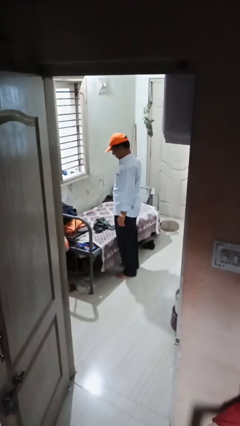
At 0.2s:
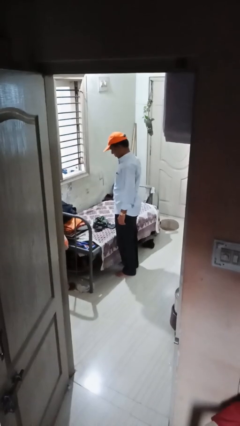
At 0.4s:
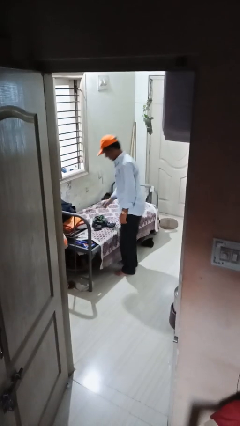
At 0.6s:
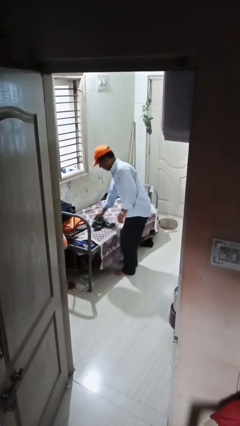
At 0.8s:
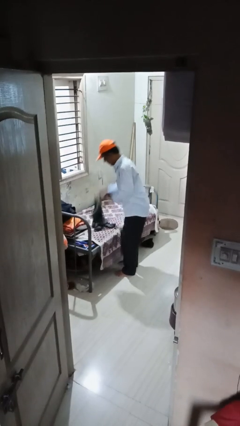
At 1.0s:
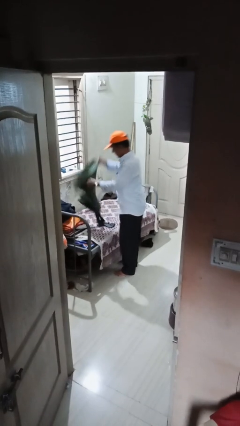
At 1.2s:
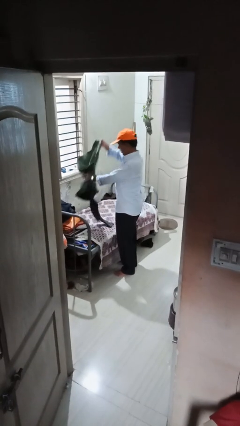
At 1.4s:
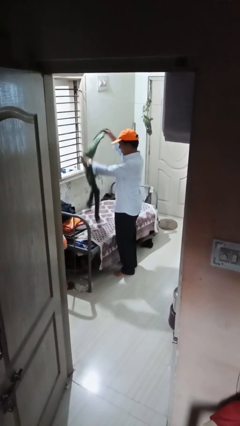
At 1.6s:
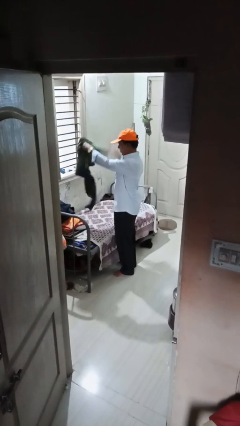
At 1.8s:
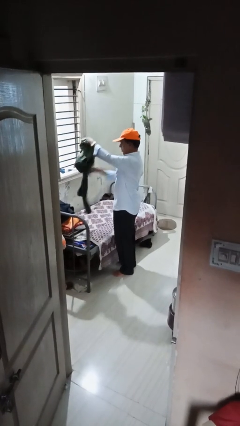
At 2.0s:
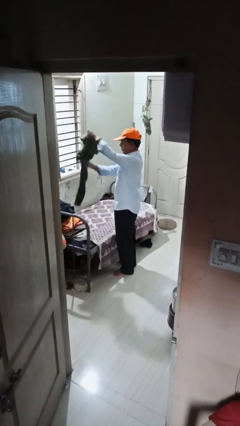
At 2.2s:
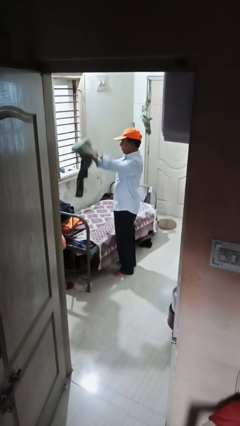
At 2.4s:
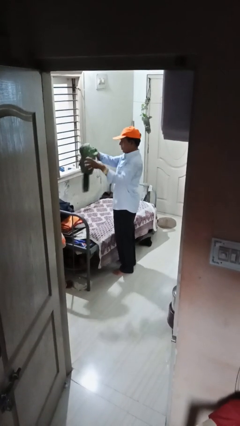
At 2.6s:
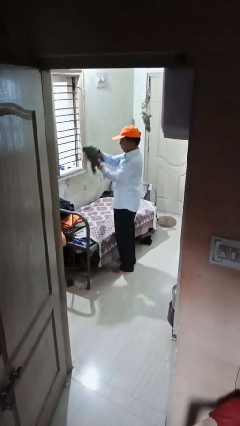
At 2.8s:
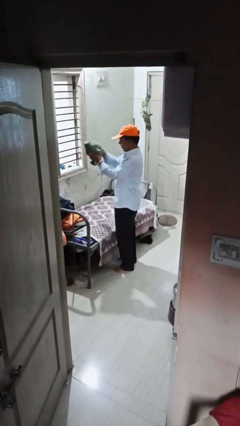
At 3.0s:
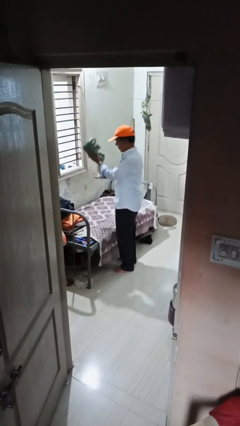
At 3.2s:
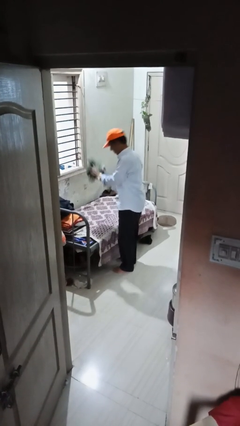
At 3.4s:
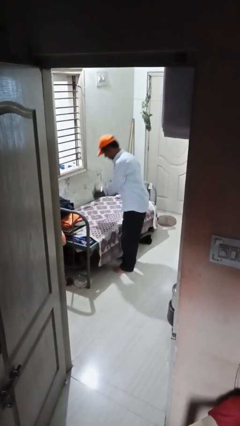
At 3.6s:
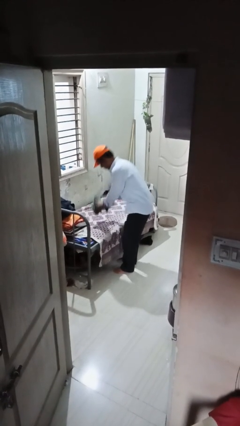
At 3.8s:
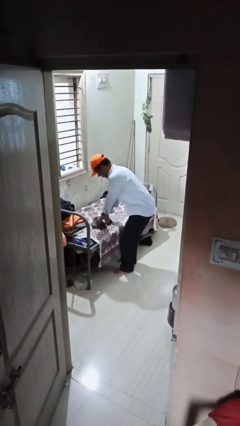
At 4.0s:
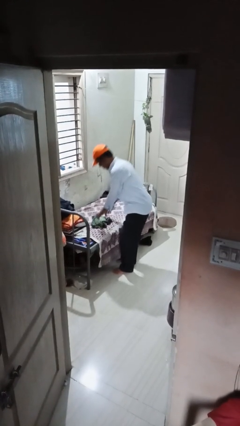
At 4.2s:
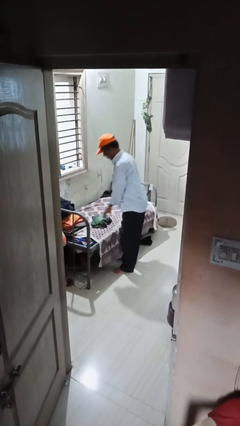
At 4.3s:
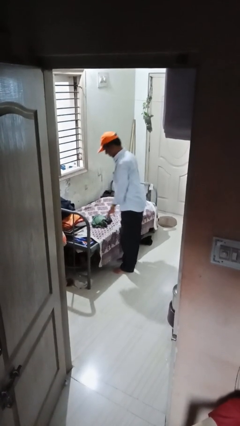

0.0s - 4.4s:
person folds shirt

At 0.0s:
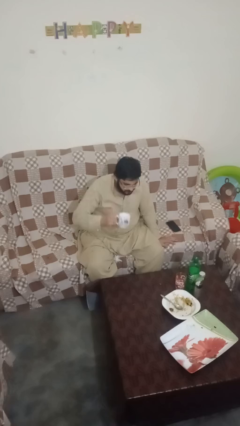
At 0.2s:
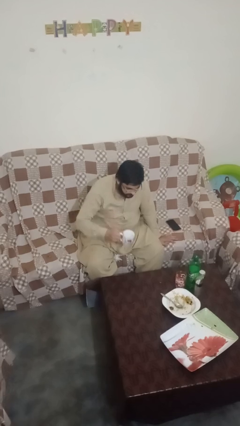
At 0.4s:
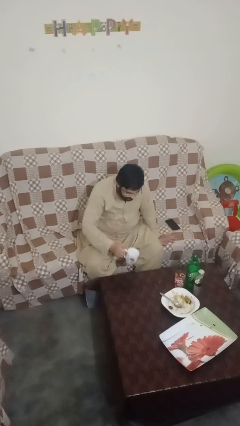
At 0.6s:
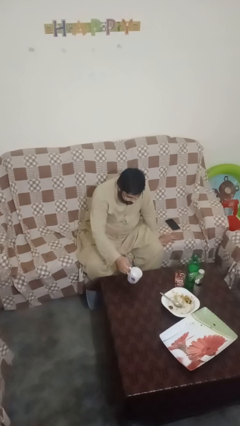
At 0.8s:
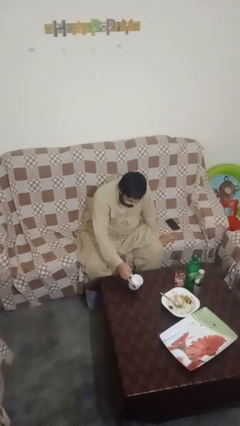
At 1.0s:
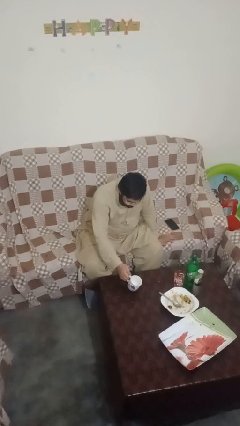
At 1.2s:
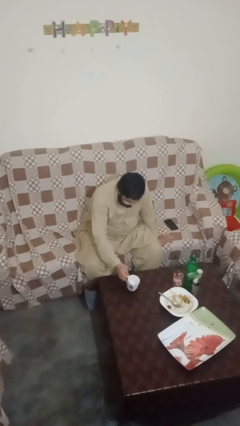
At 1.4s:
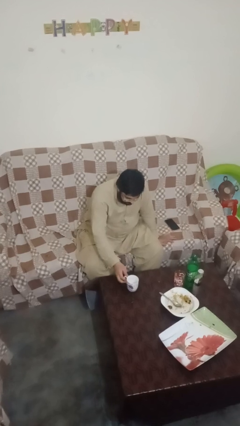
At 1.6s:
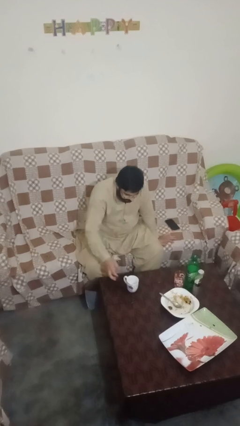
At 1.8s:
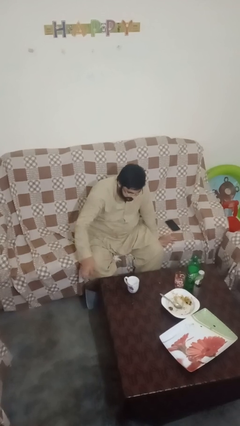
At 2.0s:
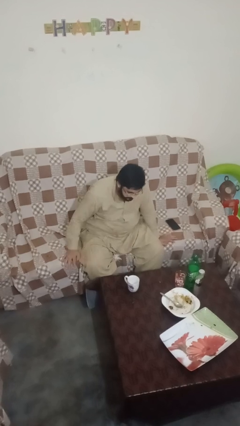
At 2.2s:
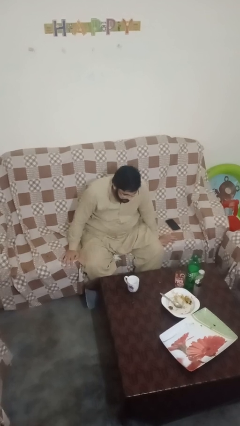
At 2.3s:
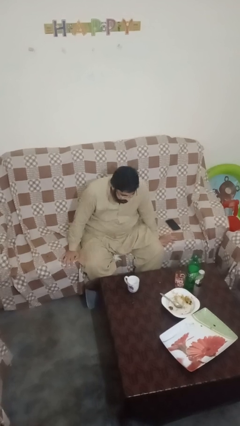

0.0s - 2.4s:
person puts down object on table

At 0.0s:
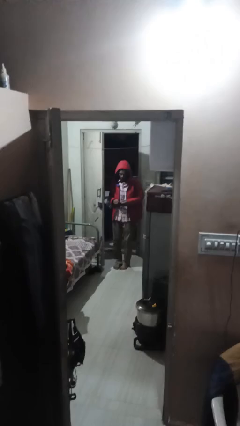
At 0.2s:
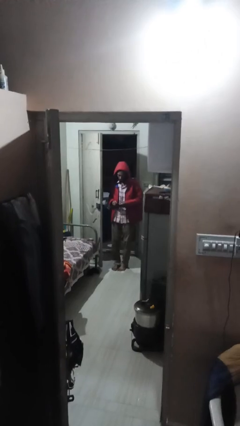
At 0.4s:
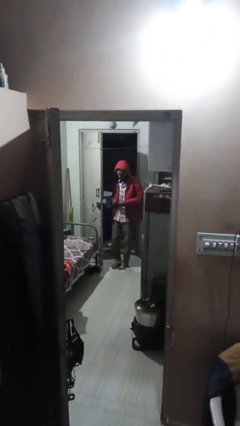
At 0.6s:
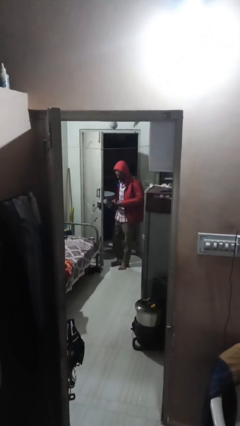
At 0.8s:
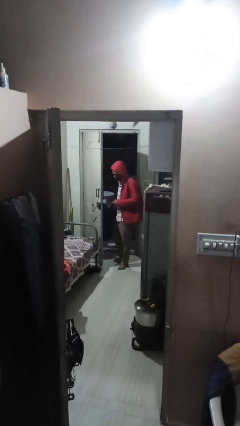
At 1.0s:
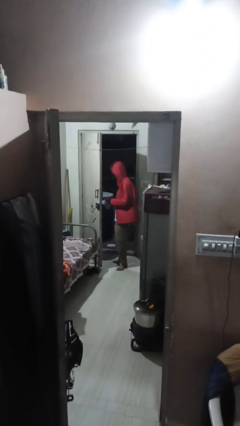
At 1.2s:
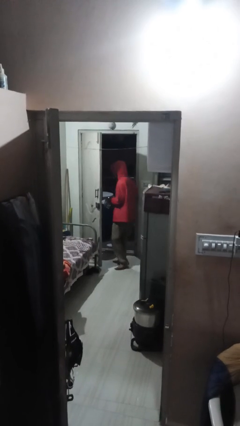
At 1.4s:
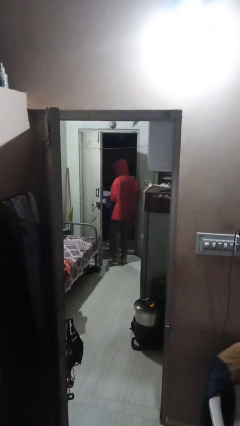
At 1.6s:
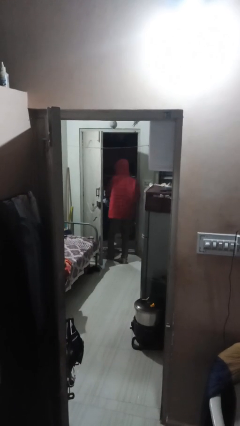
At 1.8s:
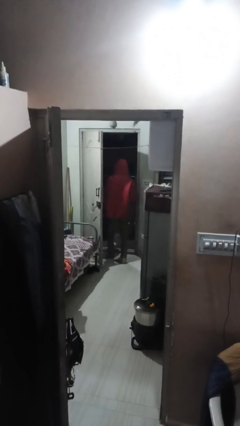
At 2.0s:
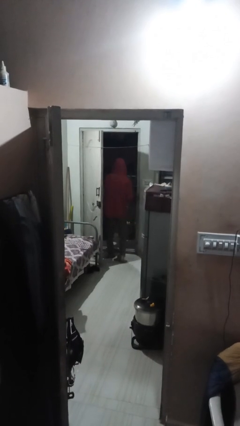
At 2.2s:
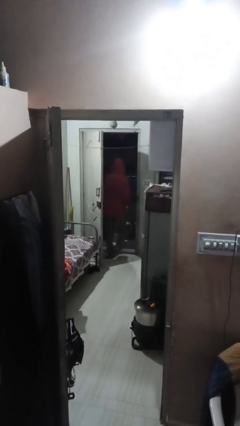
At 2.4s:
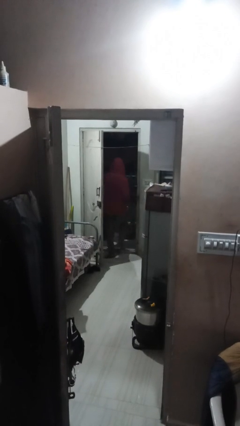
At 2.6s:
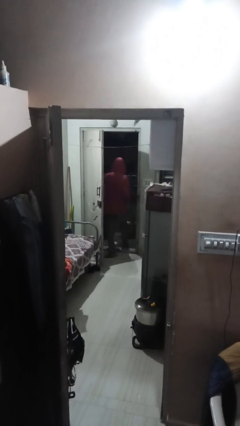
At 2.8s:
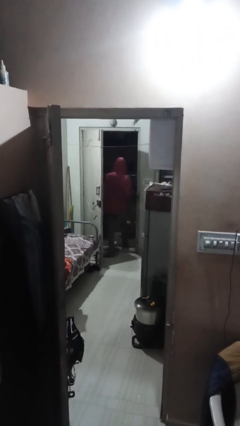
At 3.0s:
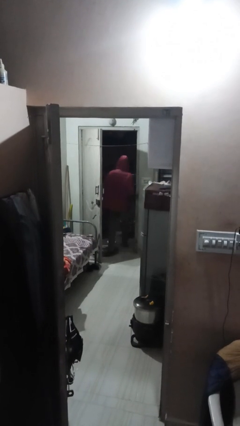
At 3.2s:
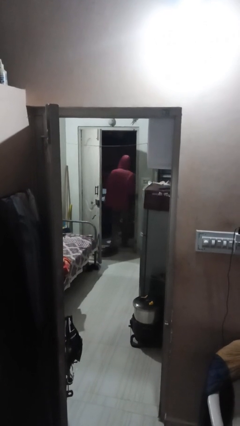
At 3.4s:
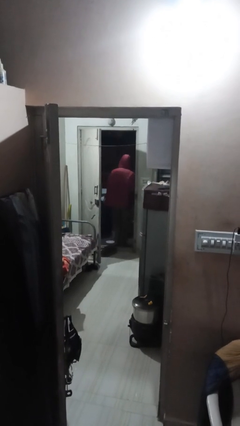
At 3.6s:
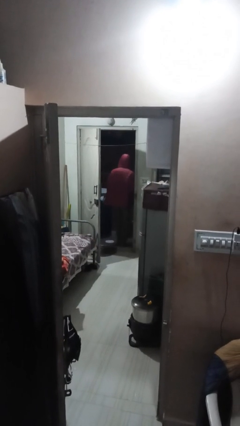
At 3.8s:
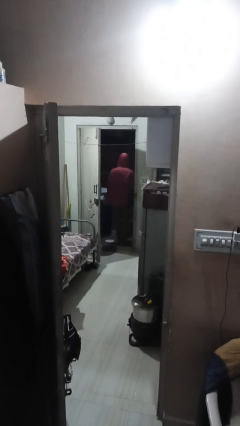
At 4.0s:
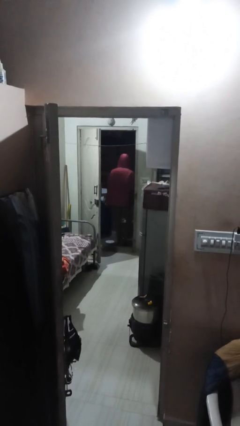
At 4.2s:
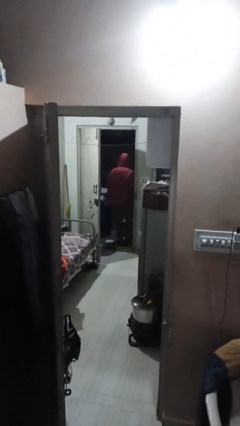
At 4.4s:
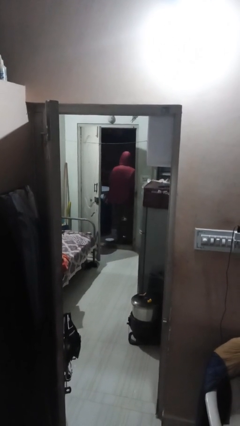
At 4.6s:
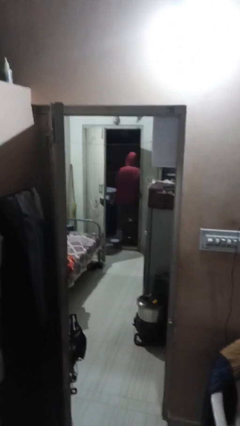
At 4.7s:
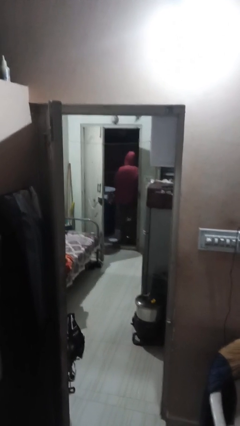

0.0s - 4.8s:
person exits scene through structure

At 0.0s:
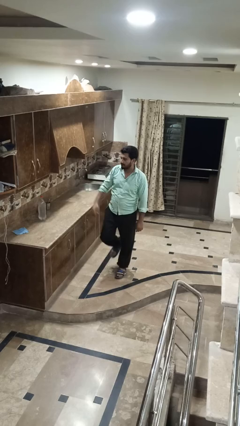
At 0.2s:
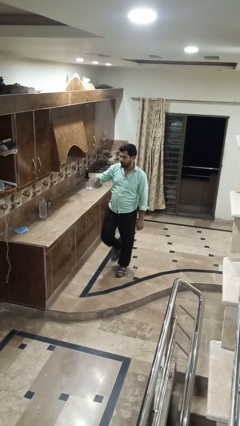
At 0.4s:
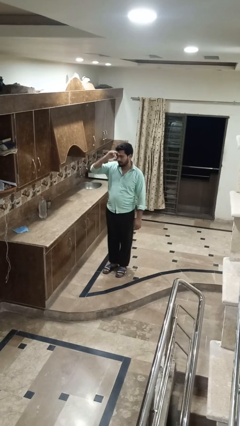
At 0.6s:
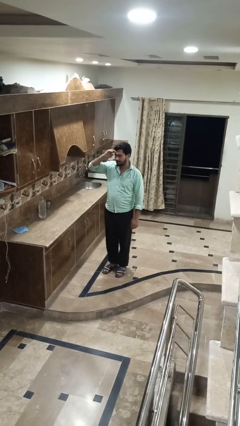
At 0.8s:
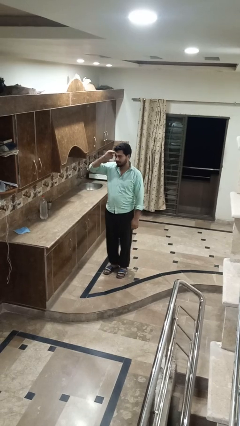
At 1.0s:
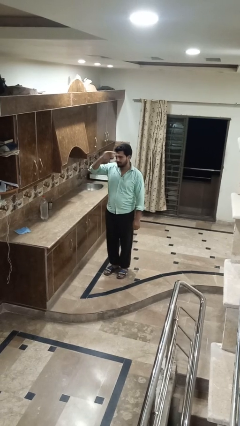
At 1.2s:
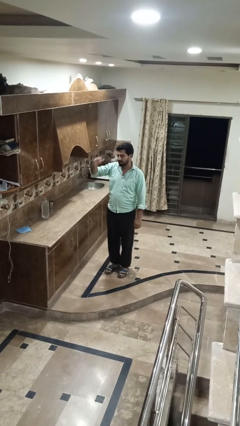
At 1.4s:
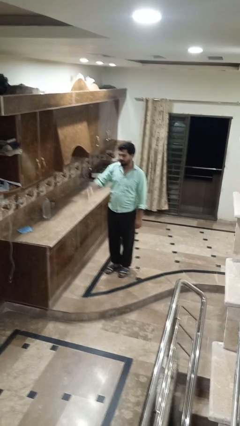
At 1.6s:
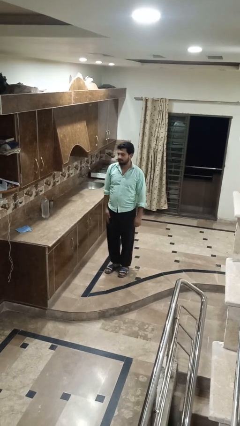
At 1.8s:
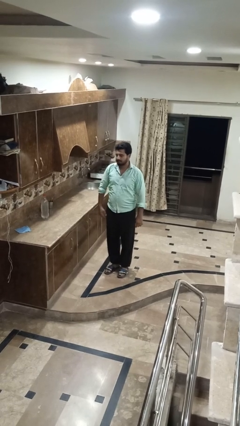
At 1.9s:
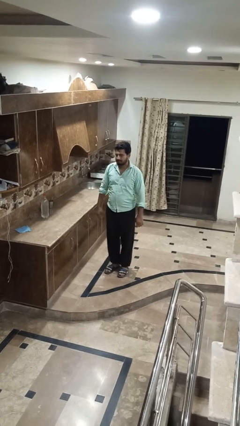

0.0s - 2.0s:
person salutes

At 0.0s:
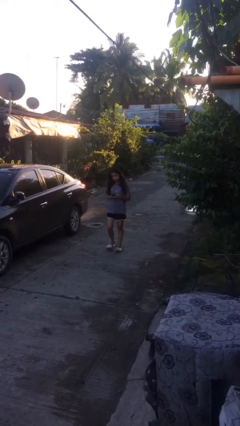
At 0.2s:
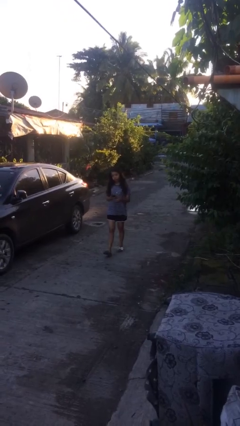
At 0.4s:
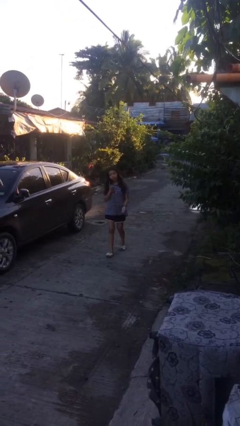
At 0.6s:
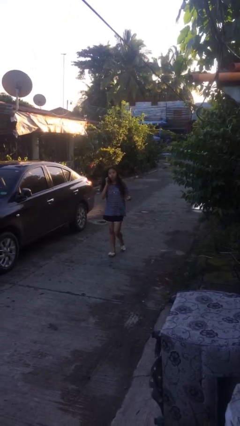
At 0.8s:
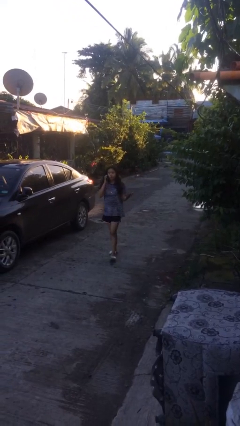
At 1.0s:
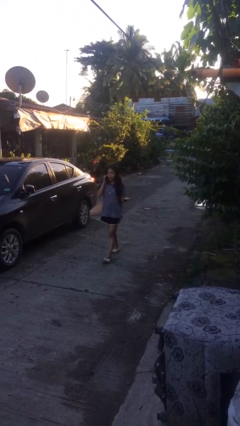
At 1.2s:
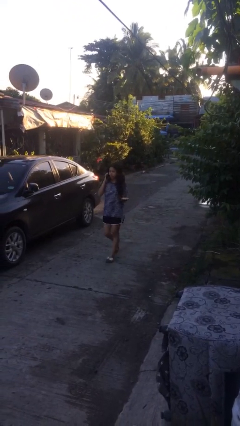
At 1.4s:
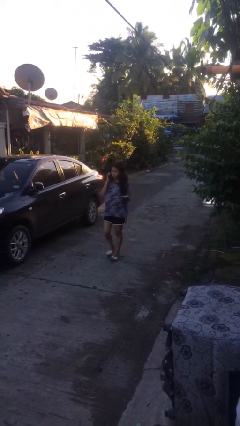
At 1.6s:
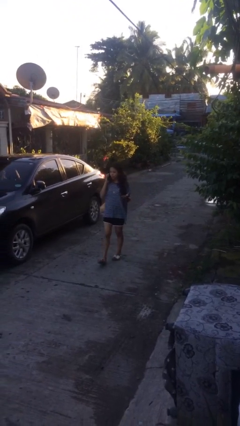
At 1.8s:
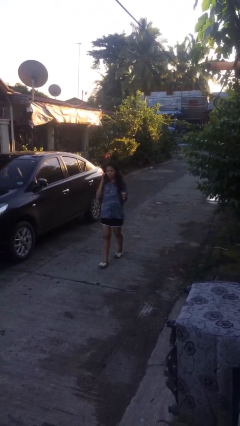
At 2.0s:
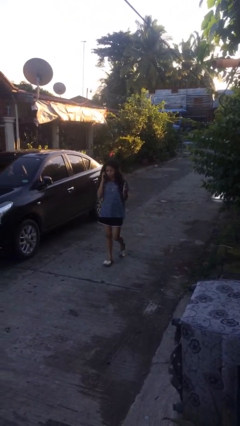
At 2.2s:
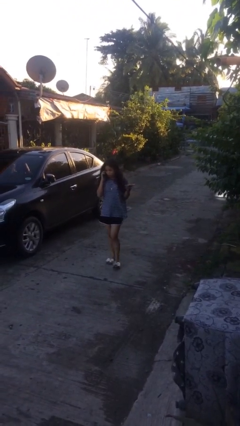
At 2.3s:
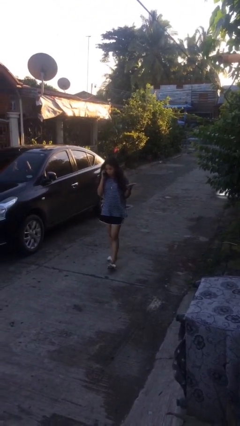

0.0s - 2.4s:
person talks on phone

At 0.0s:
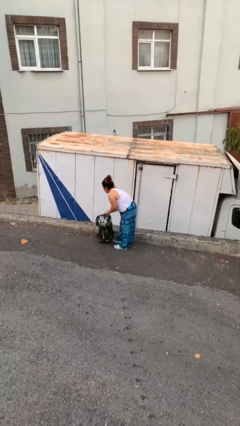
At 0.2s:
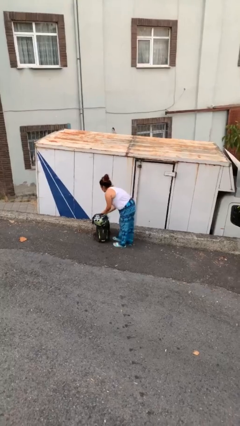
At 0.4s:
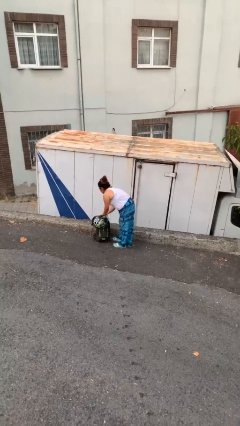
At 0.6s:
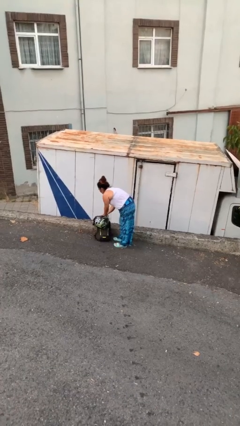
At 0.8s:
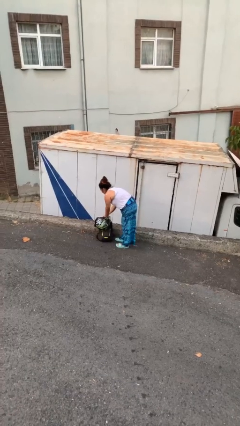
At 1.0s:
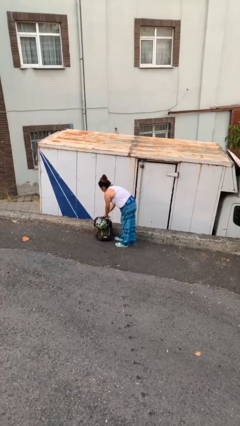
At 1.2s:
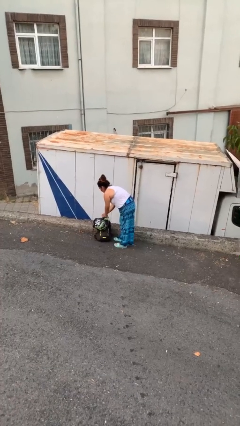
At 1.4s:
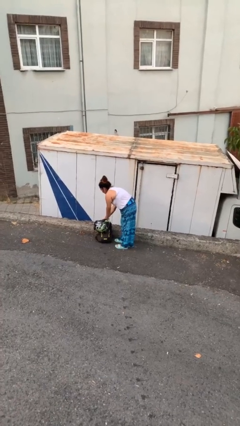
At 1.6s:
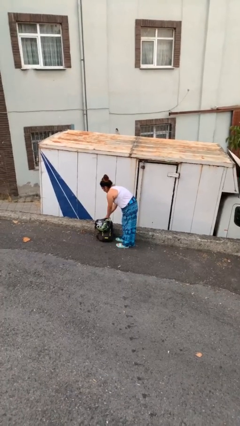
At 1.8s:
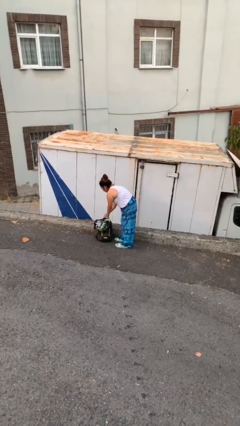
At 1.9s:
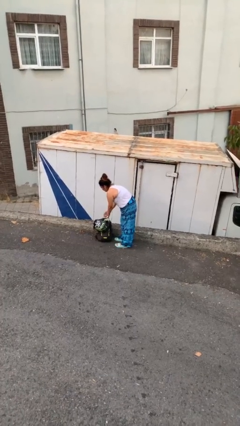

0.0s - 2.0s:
person puts down object on floor
